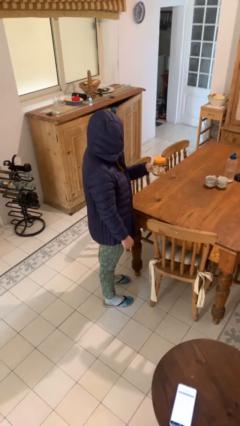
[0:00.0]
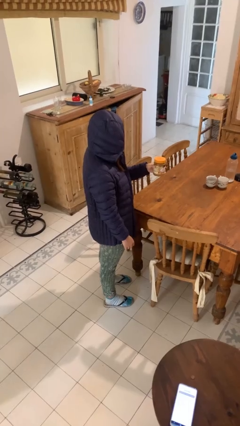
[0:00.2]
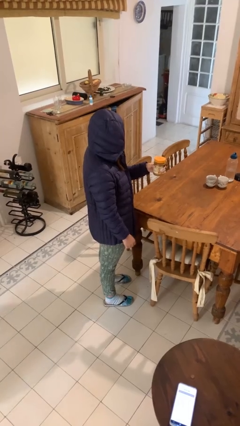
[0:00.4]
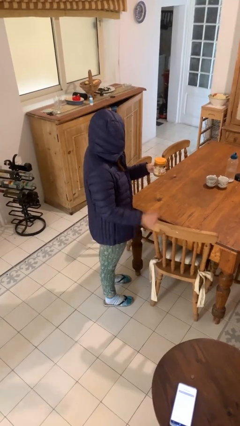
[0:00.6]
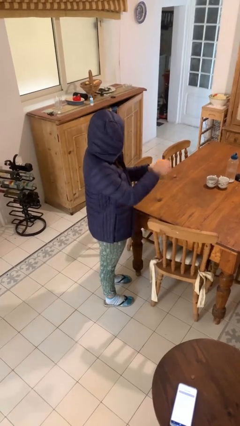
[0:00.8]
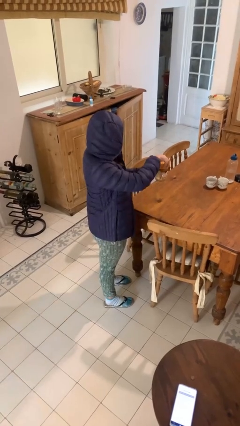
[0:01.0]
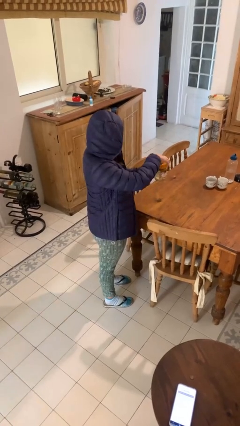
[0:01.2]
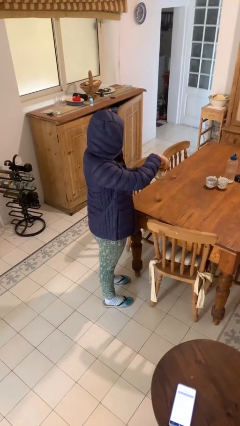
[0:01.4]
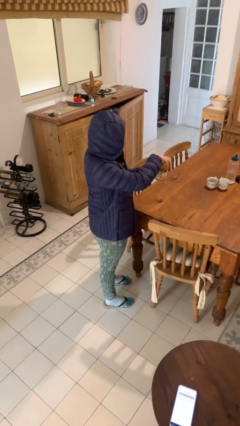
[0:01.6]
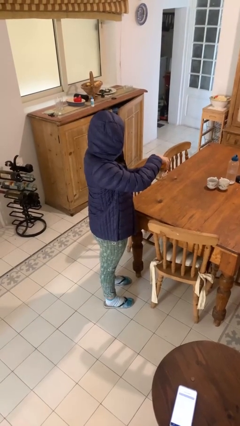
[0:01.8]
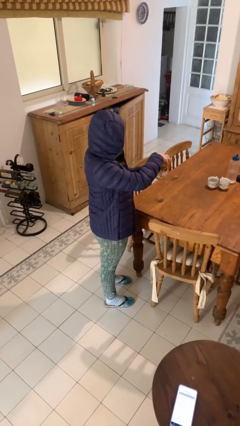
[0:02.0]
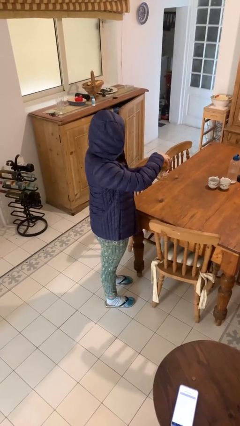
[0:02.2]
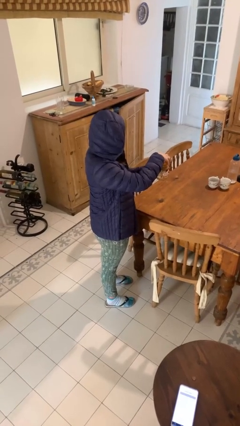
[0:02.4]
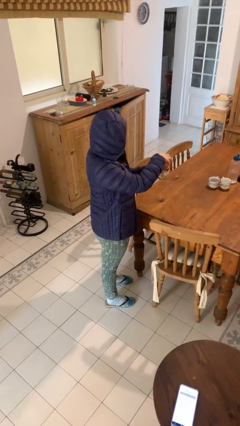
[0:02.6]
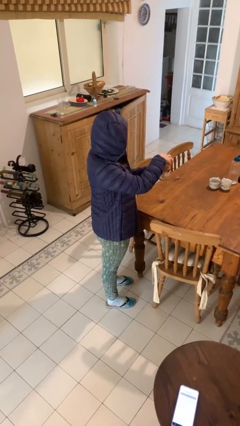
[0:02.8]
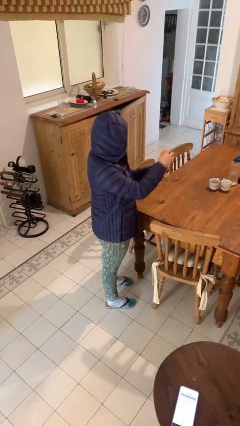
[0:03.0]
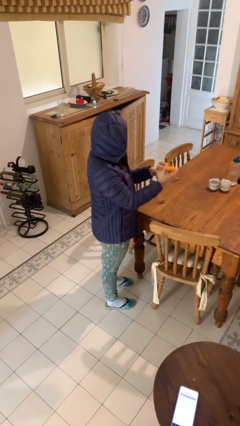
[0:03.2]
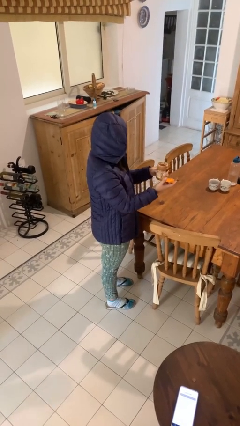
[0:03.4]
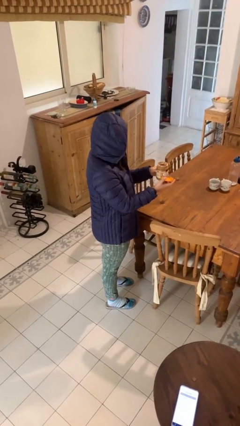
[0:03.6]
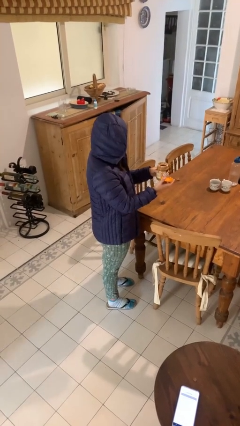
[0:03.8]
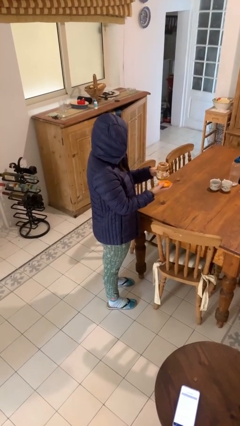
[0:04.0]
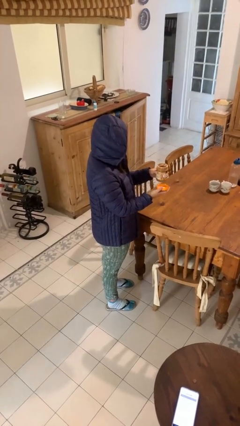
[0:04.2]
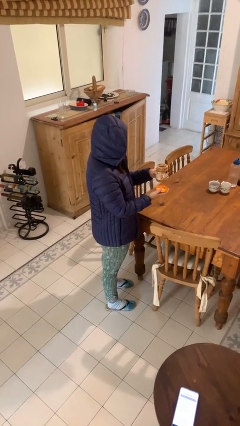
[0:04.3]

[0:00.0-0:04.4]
person opens jar

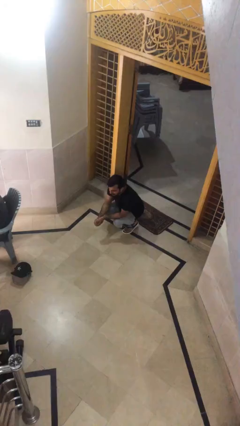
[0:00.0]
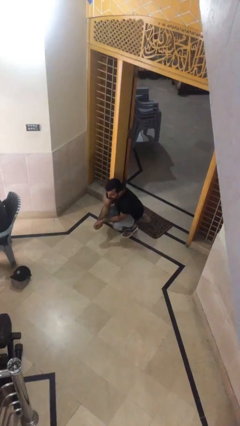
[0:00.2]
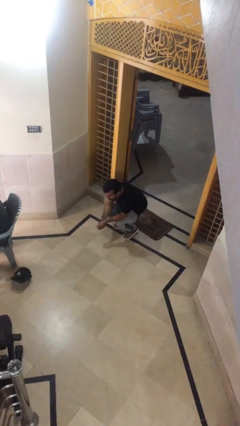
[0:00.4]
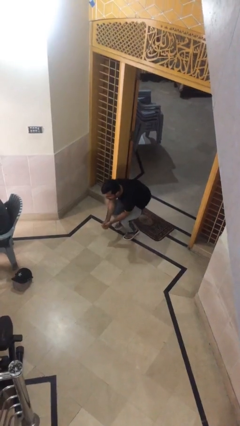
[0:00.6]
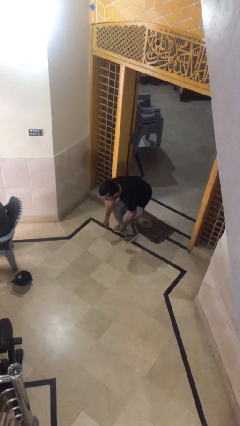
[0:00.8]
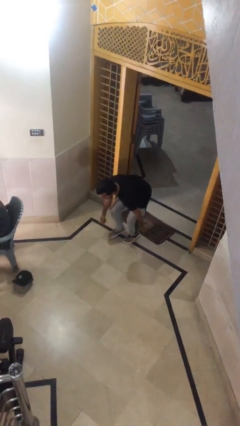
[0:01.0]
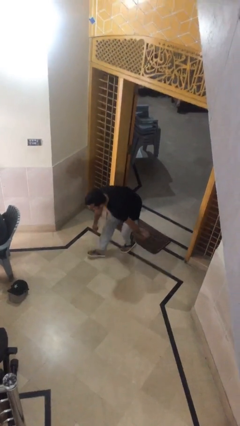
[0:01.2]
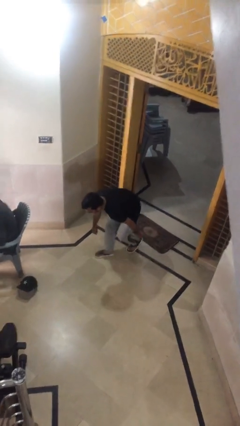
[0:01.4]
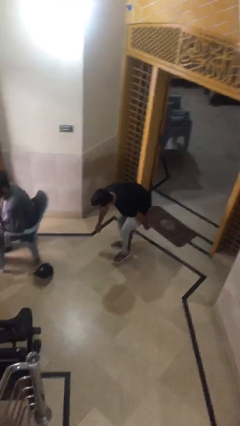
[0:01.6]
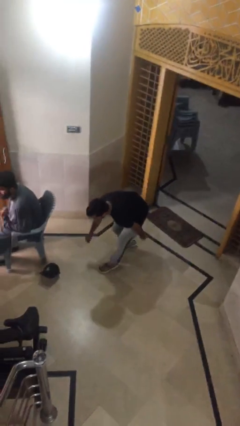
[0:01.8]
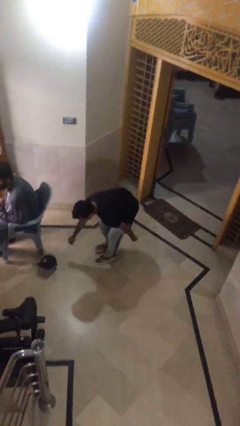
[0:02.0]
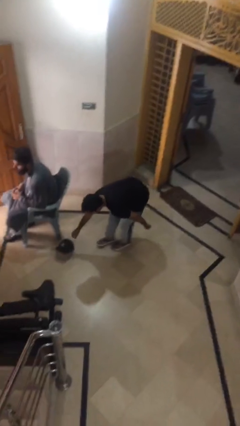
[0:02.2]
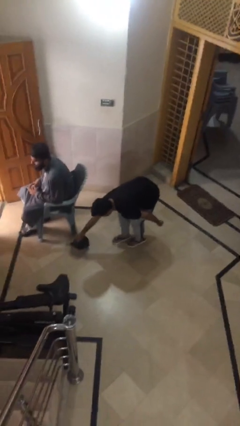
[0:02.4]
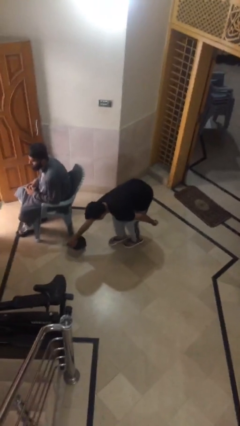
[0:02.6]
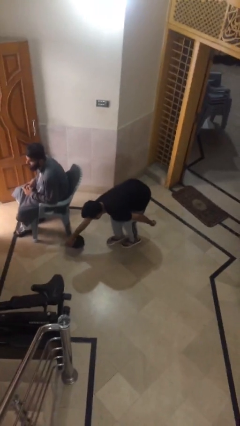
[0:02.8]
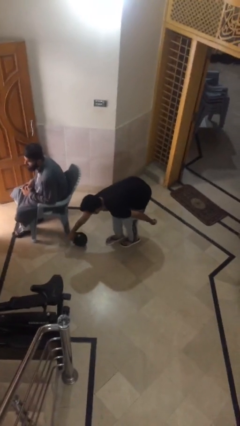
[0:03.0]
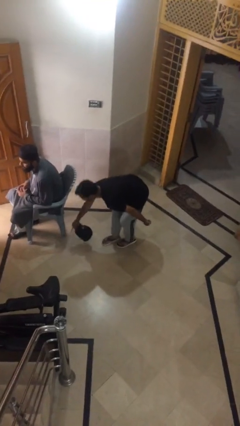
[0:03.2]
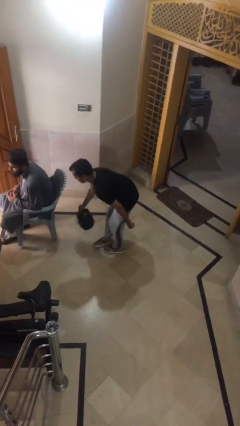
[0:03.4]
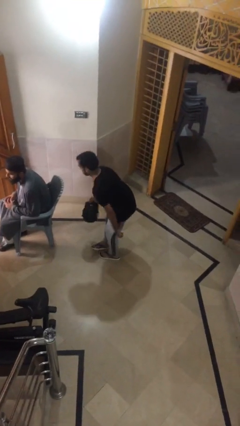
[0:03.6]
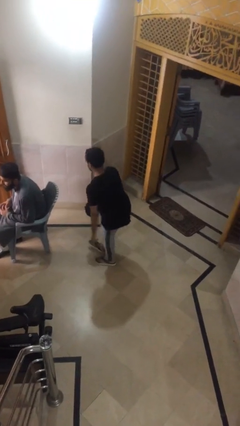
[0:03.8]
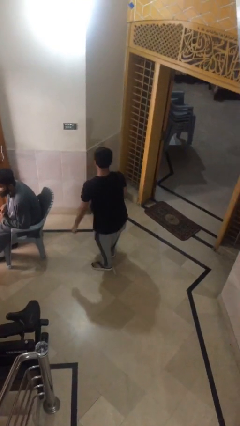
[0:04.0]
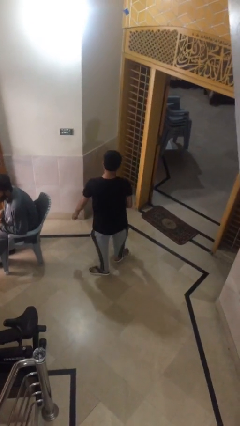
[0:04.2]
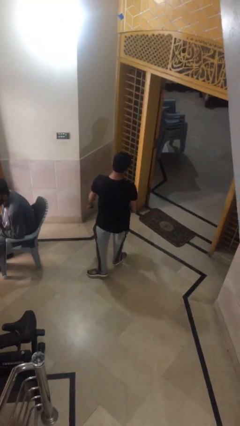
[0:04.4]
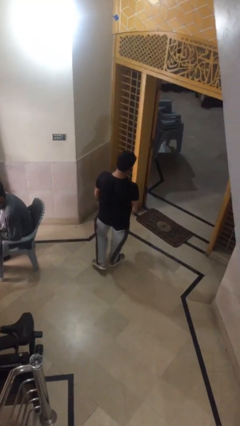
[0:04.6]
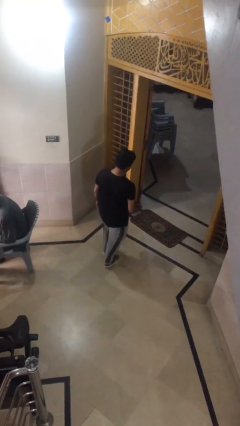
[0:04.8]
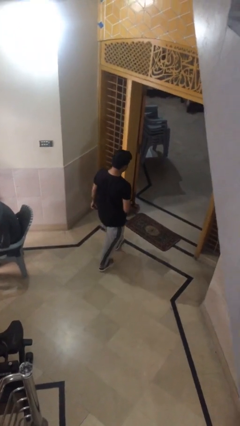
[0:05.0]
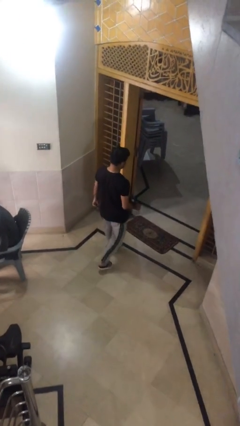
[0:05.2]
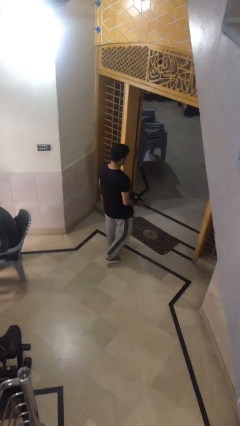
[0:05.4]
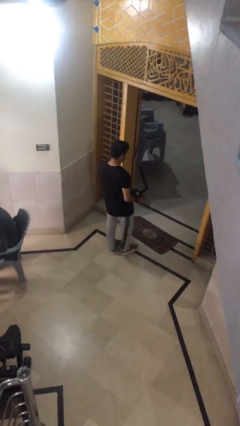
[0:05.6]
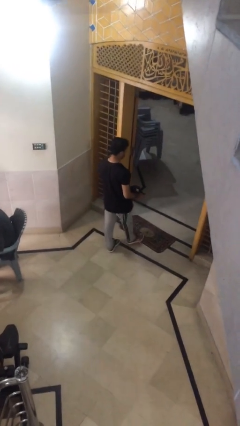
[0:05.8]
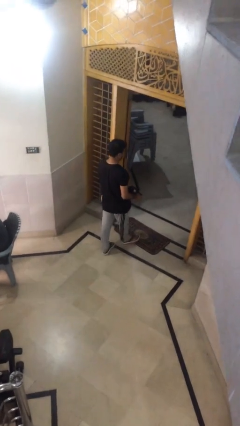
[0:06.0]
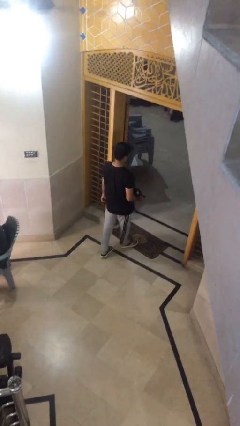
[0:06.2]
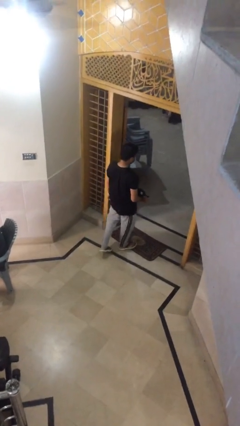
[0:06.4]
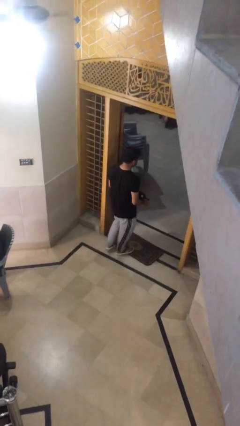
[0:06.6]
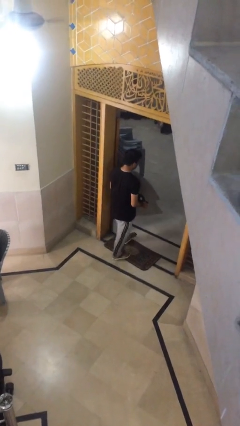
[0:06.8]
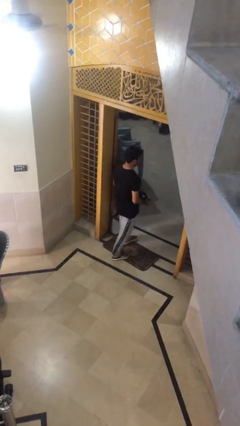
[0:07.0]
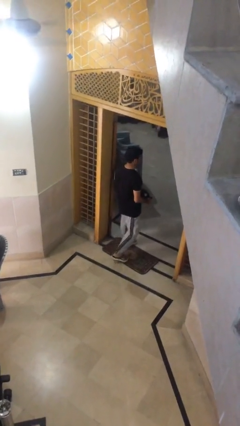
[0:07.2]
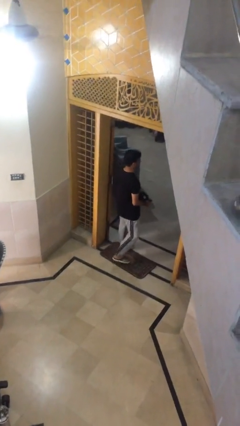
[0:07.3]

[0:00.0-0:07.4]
person steals object from person

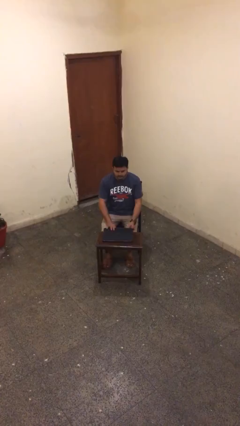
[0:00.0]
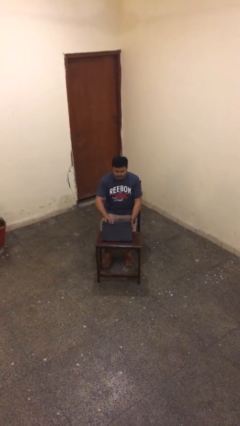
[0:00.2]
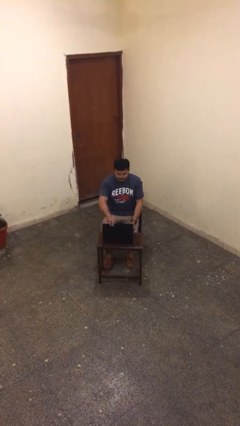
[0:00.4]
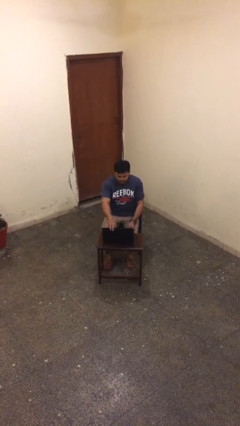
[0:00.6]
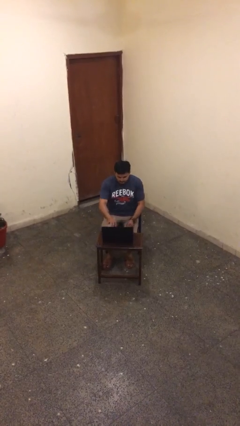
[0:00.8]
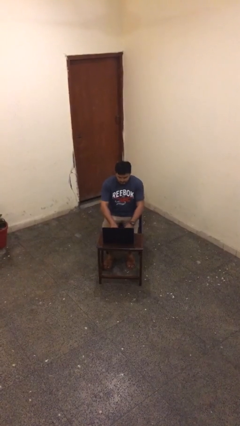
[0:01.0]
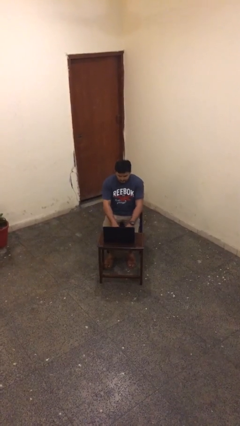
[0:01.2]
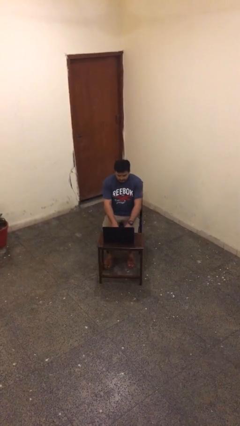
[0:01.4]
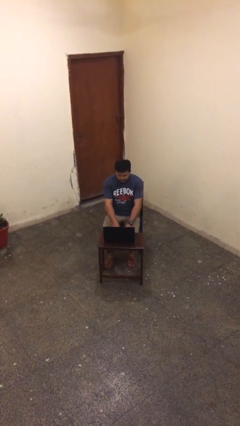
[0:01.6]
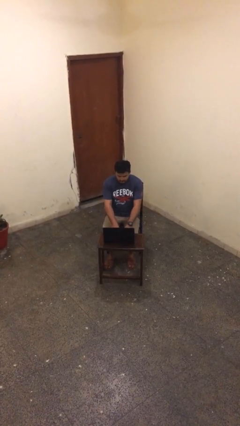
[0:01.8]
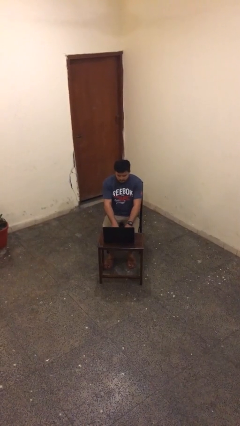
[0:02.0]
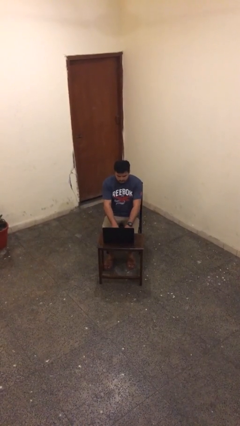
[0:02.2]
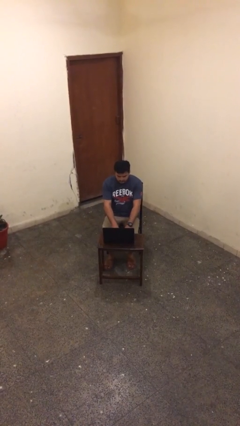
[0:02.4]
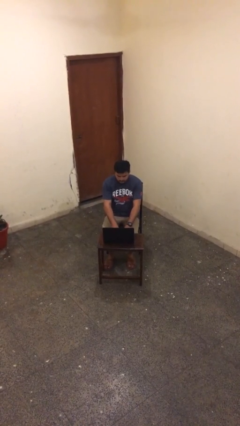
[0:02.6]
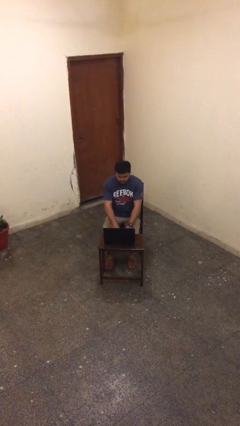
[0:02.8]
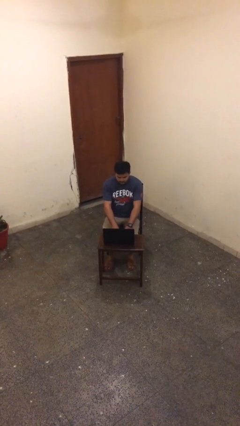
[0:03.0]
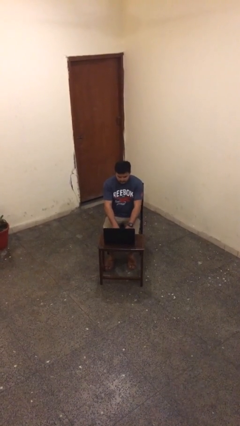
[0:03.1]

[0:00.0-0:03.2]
person interacts with laptop

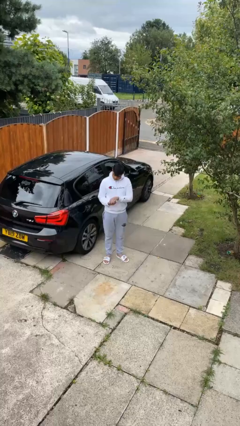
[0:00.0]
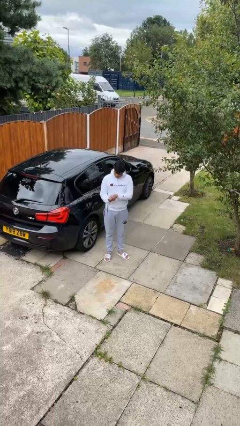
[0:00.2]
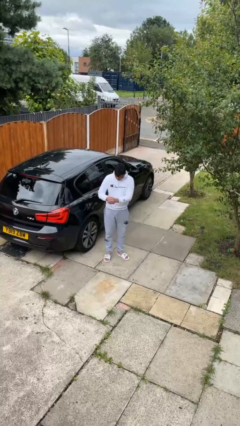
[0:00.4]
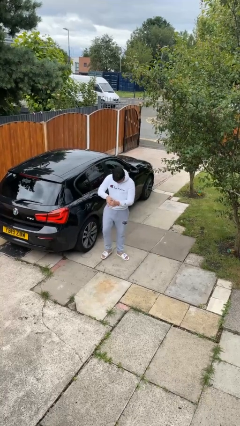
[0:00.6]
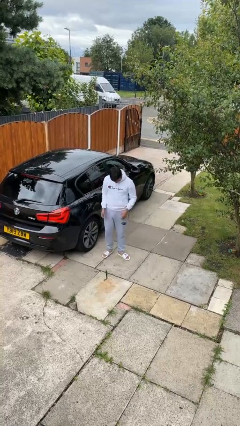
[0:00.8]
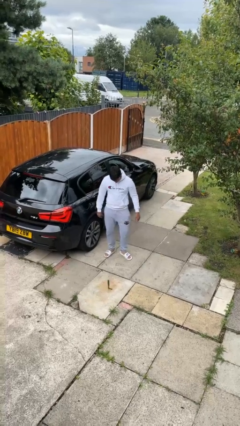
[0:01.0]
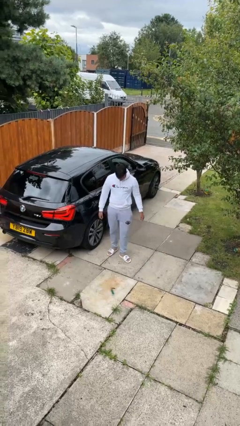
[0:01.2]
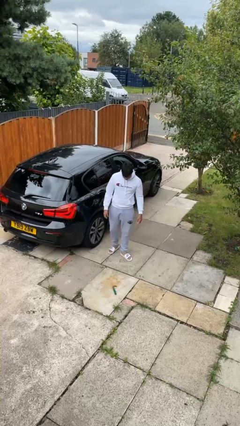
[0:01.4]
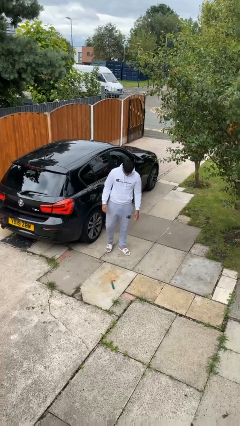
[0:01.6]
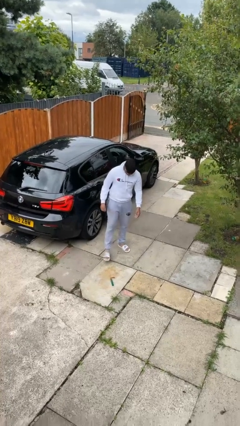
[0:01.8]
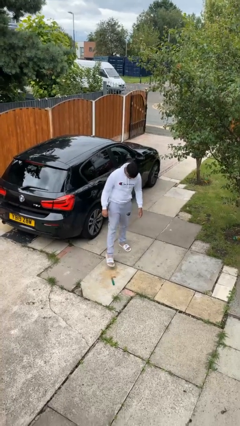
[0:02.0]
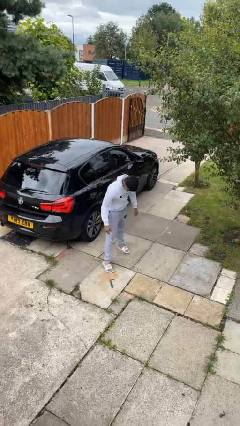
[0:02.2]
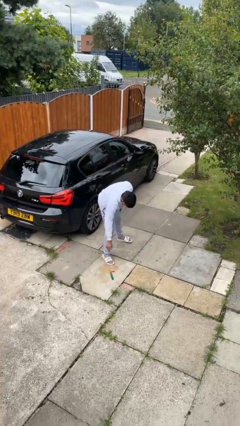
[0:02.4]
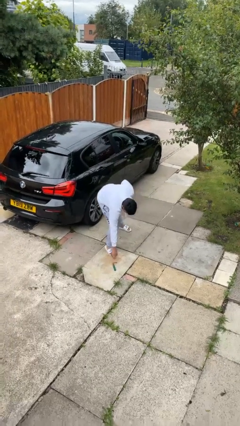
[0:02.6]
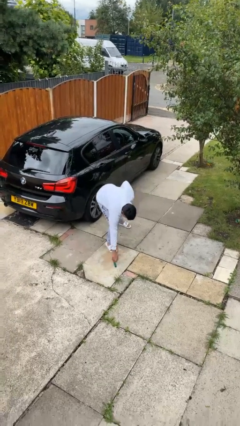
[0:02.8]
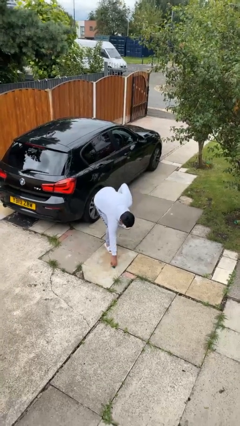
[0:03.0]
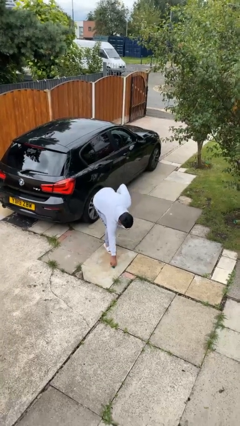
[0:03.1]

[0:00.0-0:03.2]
person drops object
